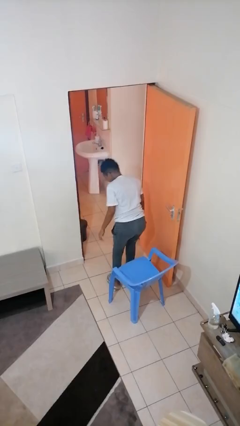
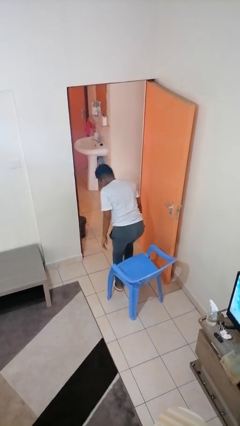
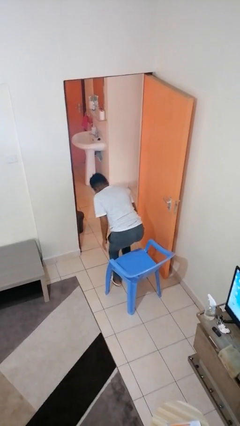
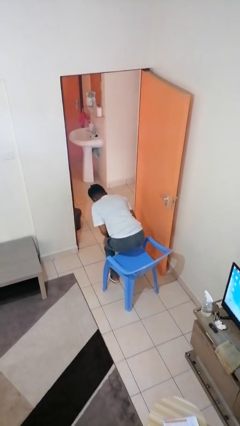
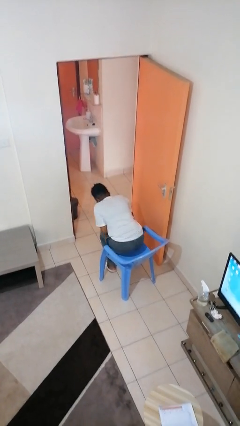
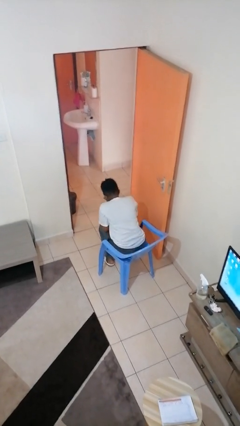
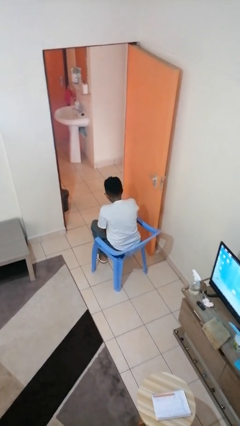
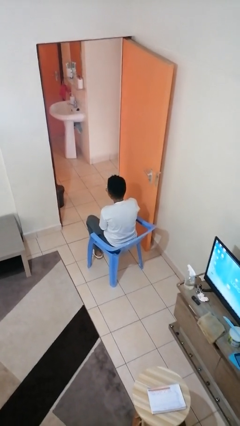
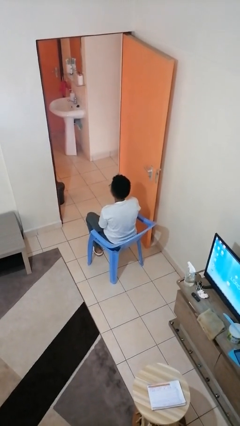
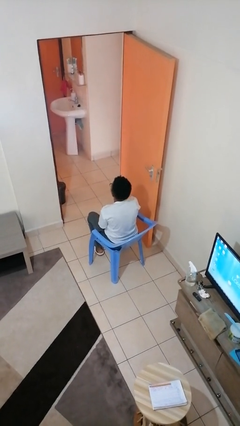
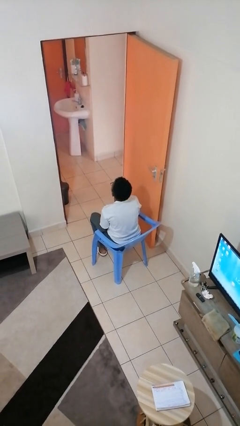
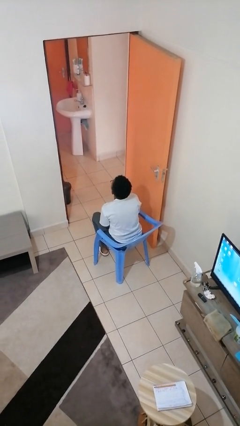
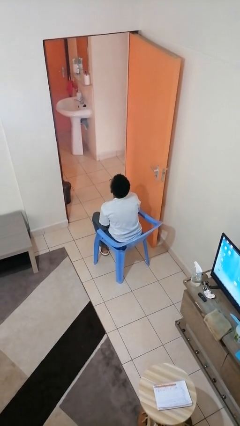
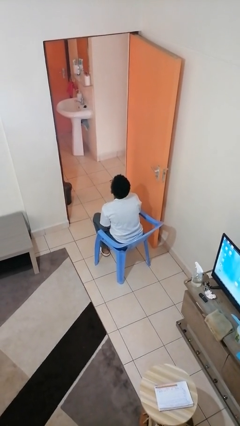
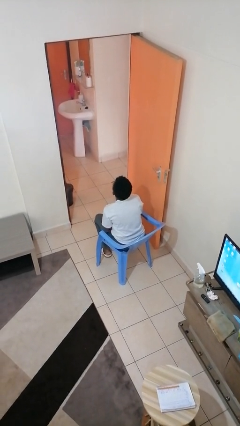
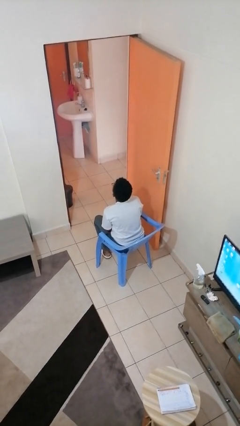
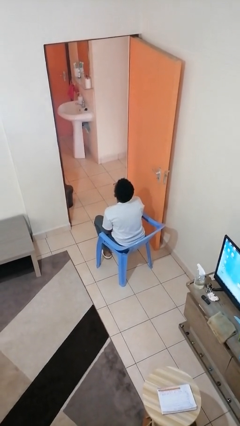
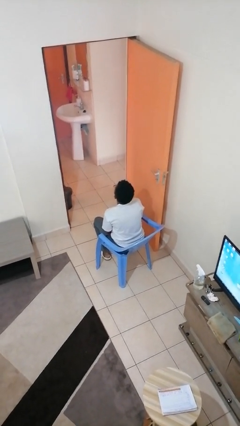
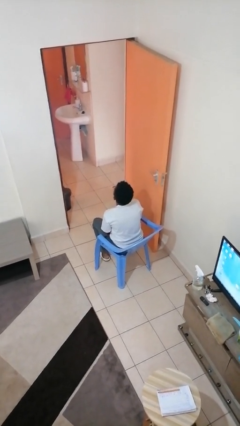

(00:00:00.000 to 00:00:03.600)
person sits down

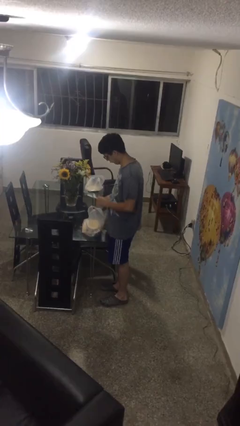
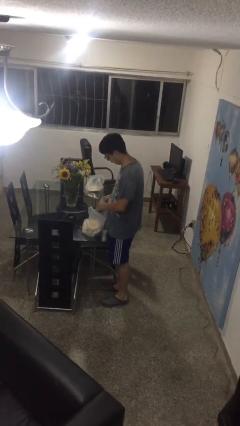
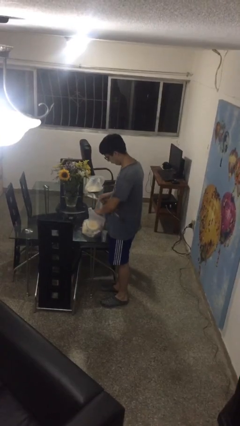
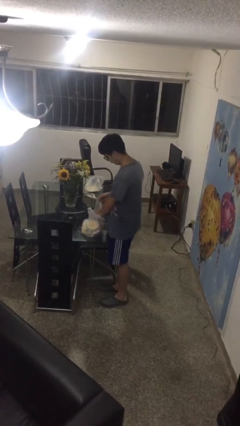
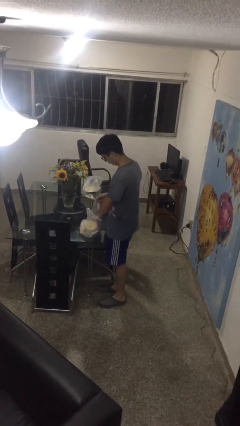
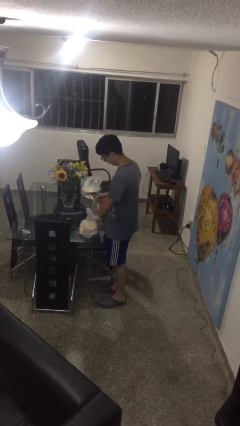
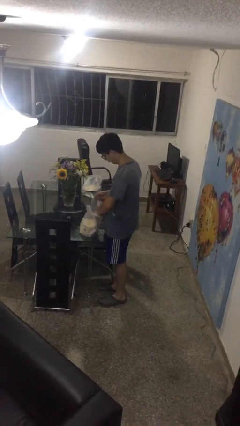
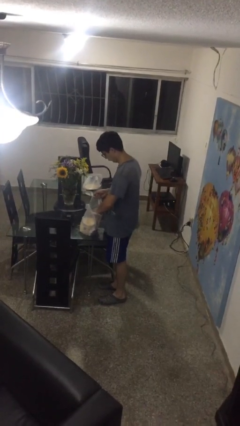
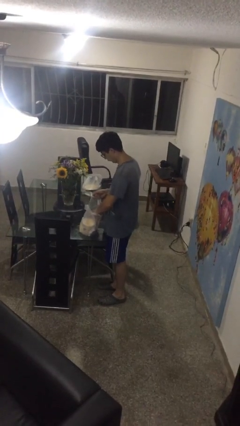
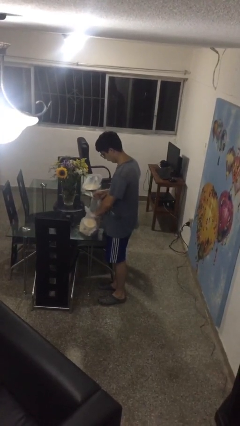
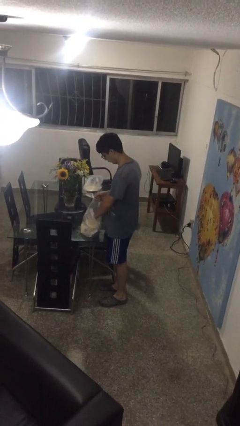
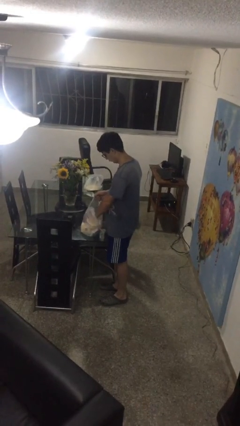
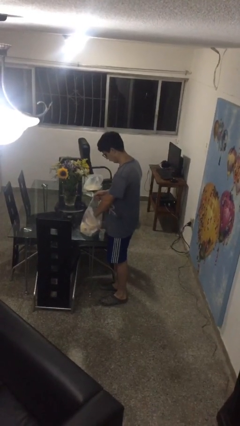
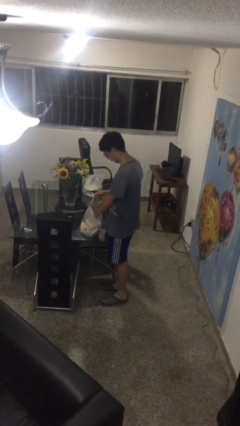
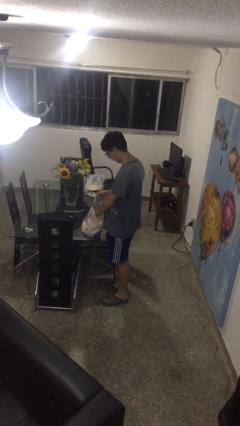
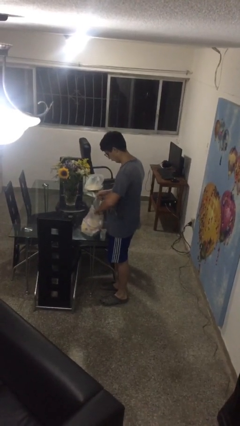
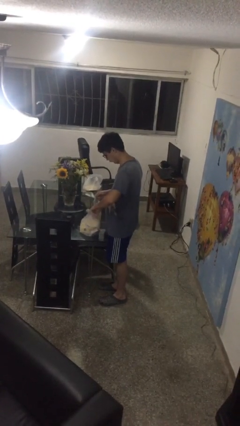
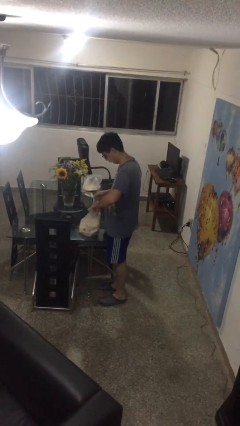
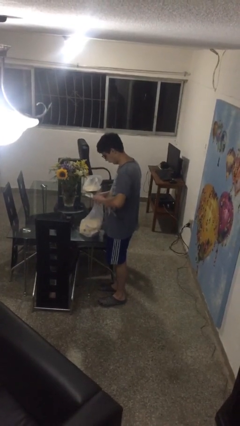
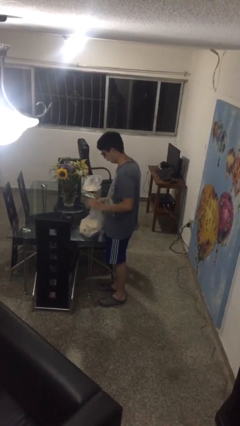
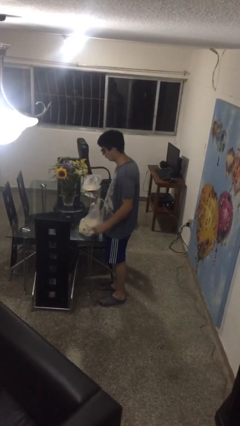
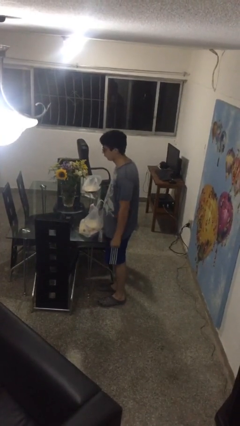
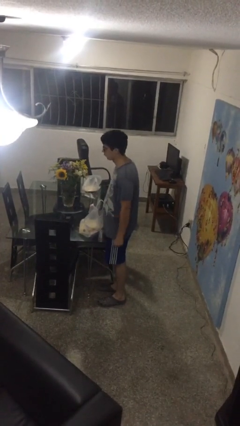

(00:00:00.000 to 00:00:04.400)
person searches in bag

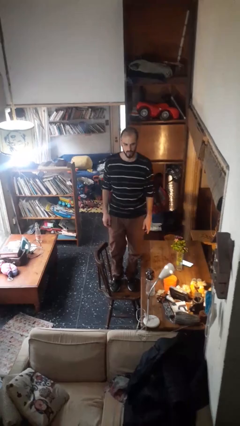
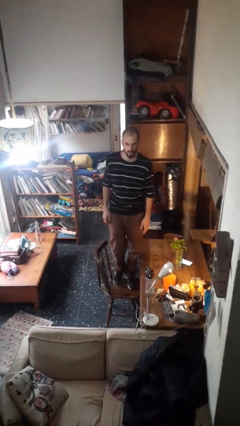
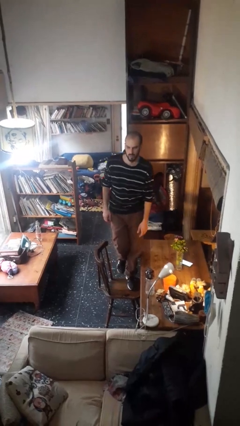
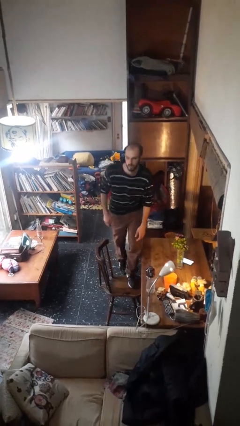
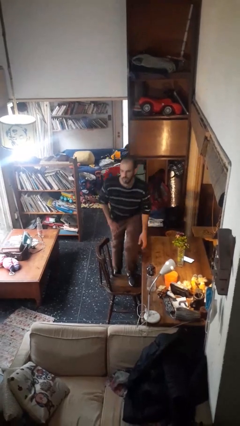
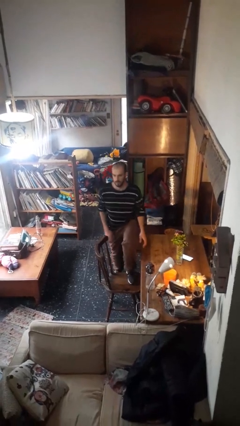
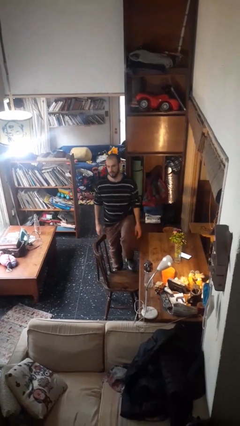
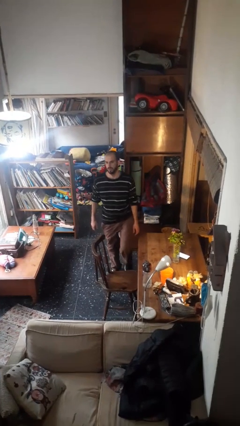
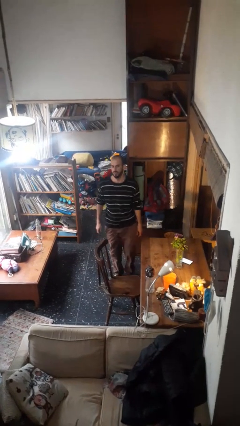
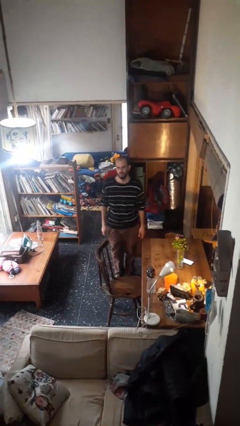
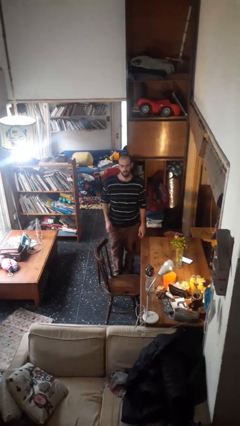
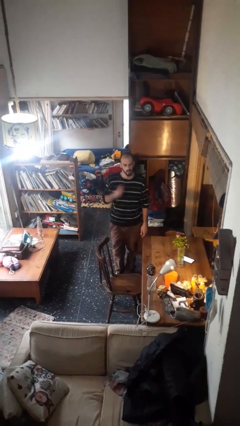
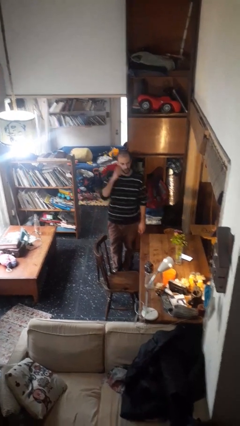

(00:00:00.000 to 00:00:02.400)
person climbs off chair

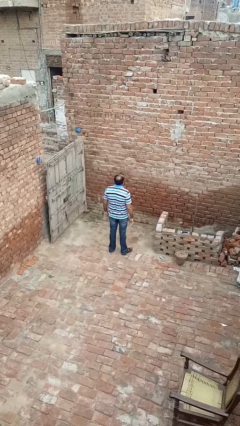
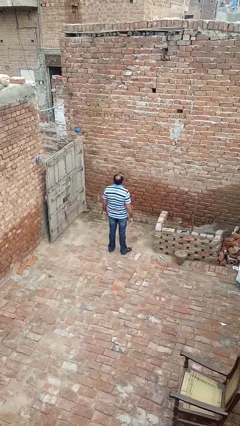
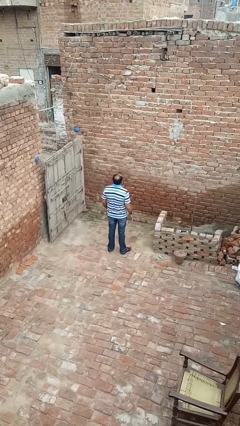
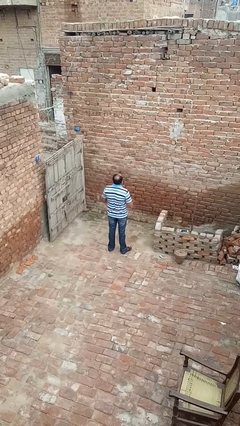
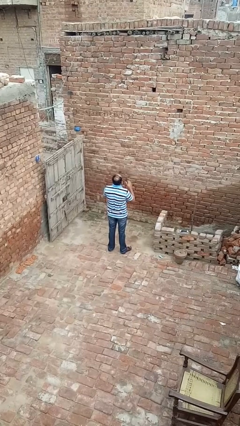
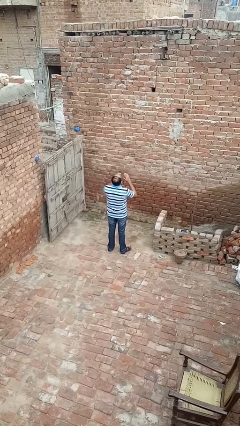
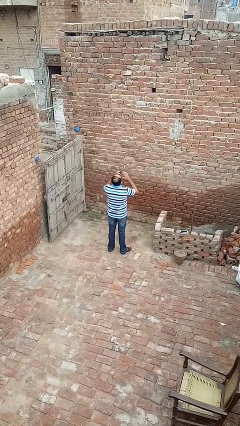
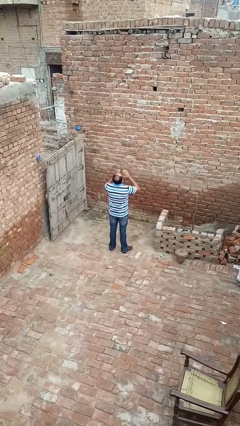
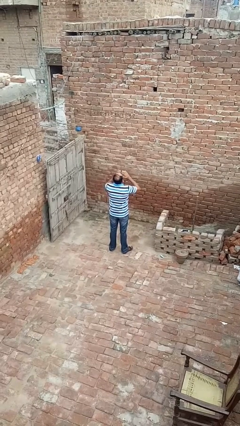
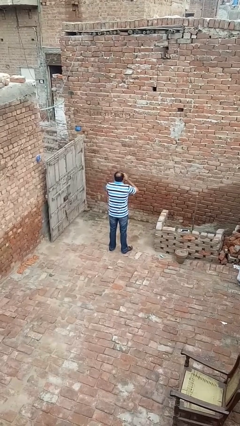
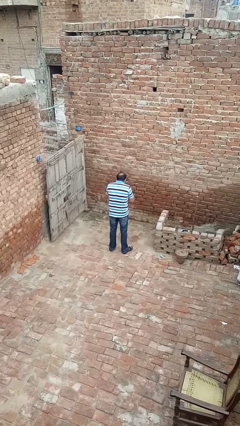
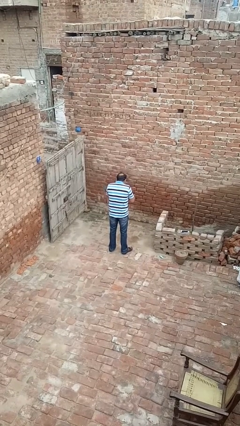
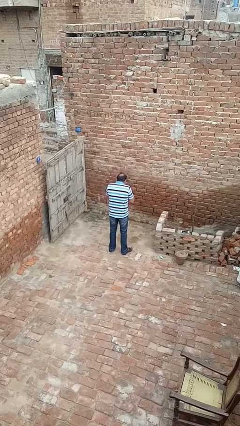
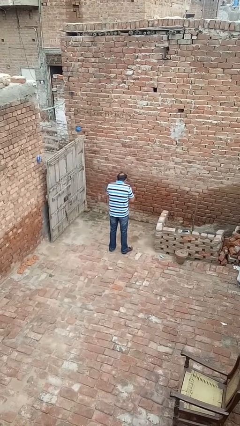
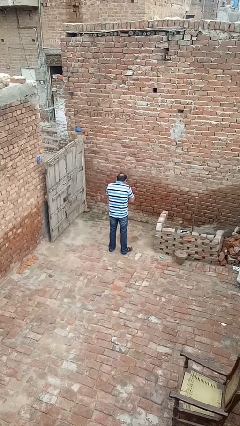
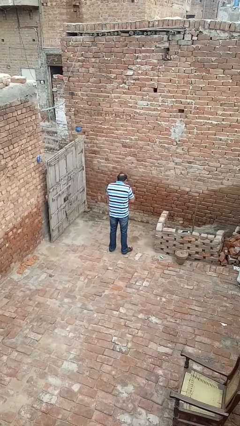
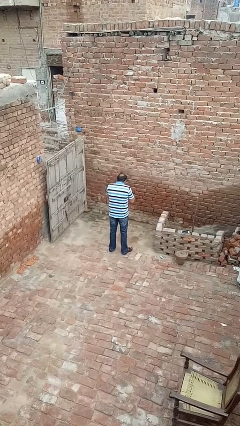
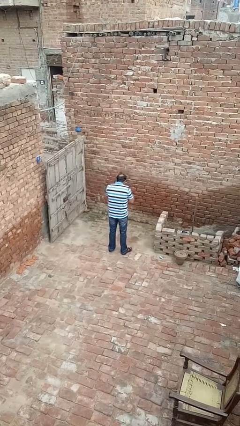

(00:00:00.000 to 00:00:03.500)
person sneezes into hand

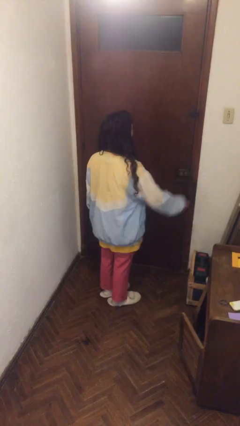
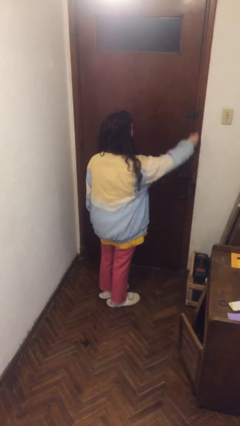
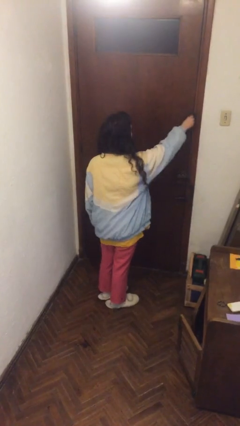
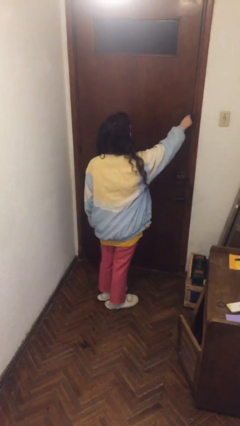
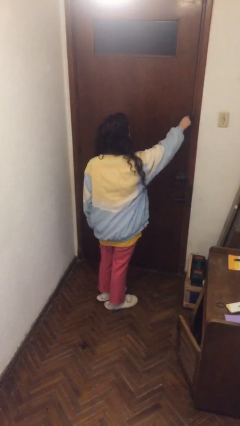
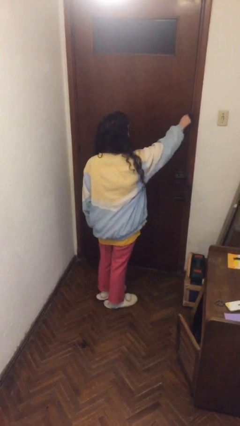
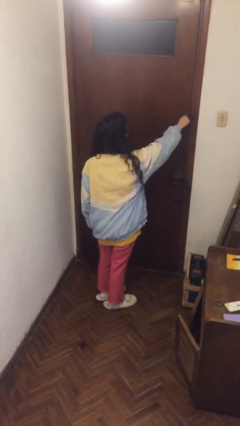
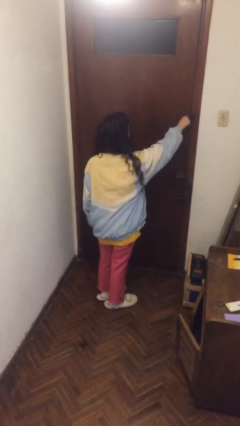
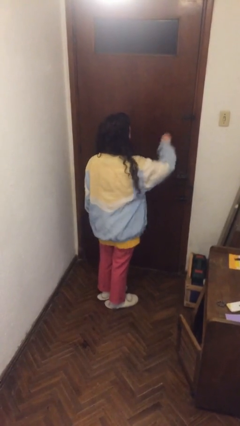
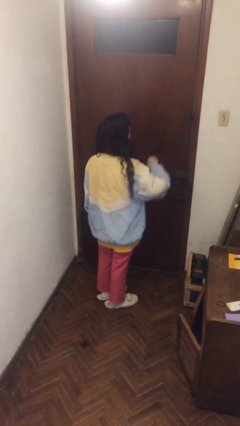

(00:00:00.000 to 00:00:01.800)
person unlocks door with keys

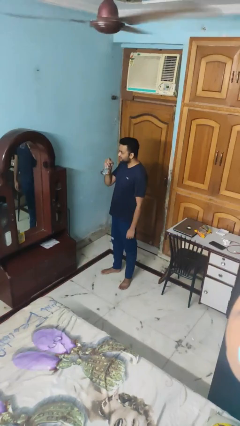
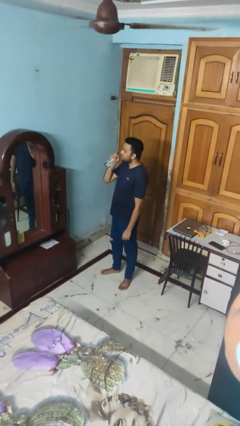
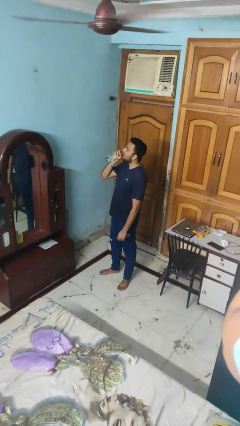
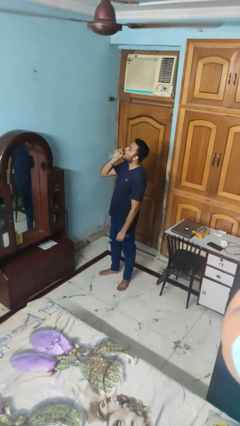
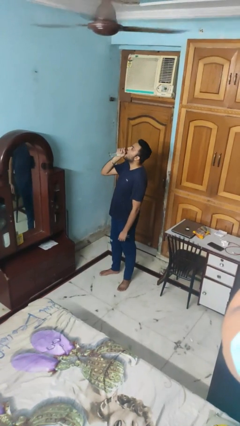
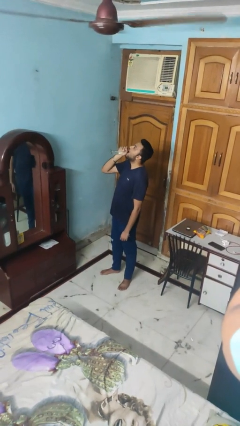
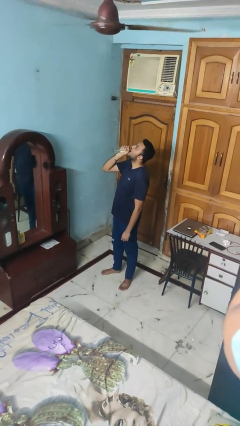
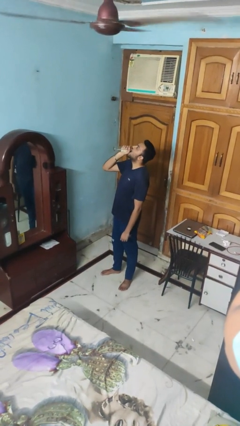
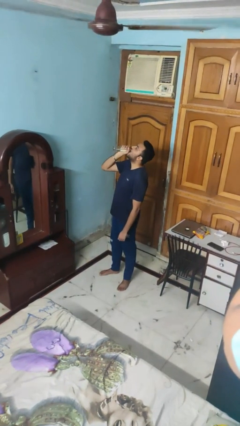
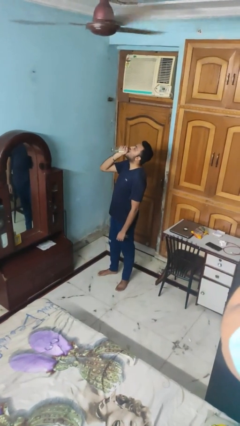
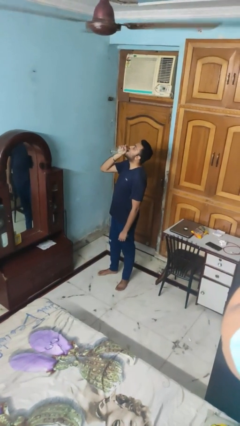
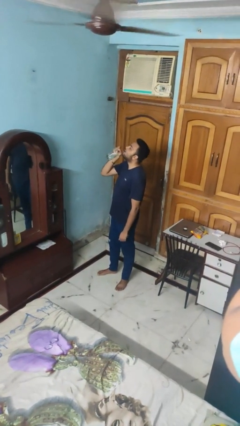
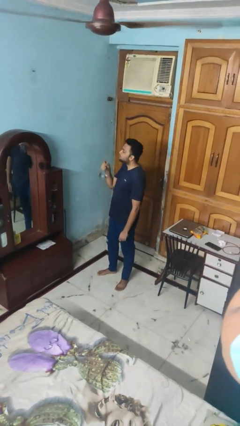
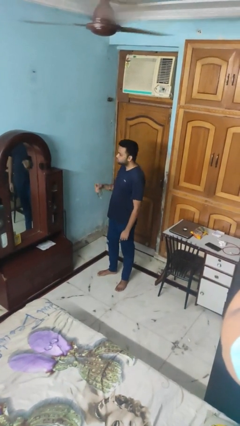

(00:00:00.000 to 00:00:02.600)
person drinks from bottle
